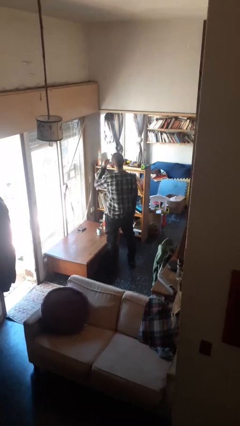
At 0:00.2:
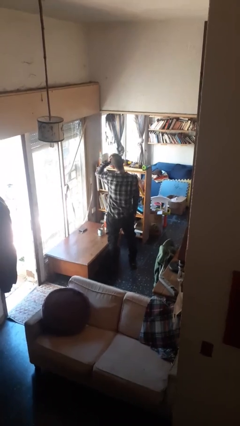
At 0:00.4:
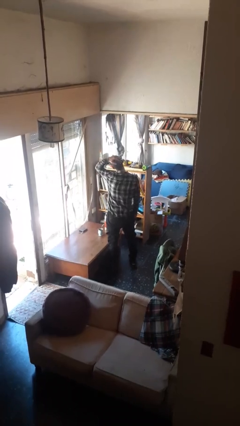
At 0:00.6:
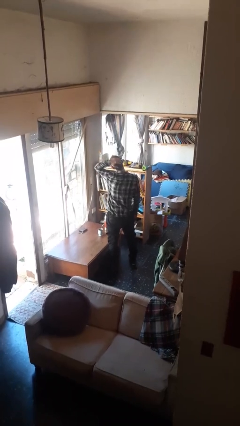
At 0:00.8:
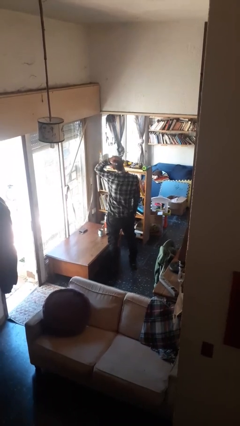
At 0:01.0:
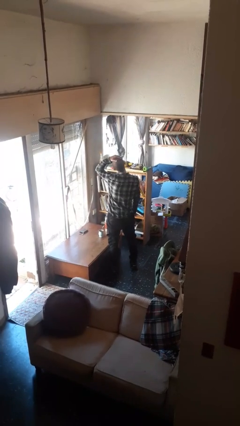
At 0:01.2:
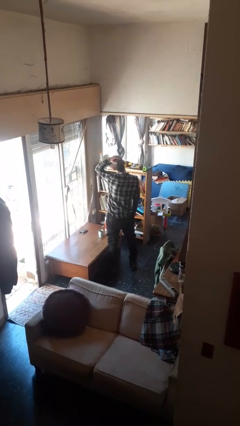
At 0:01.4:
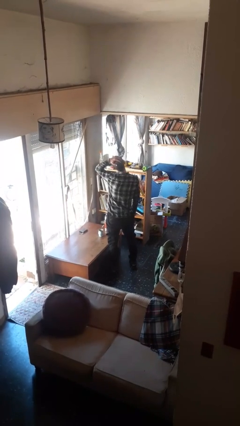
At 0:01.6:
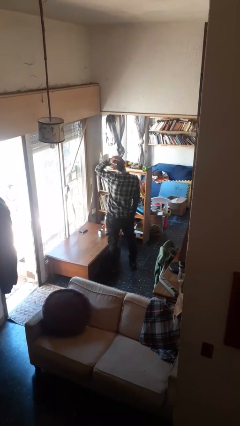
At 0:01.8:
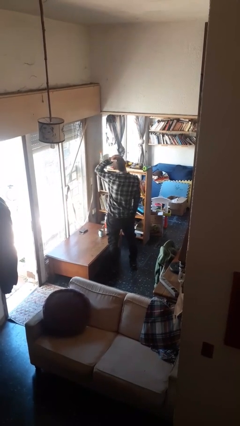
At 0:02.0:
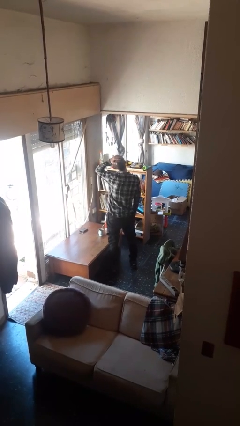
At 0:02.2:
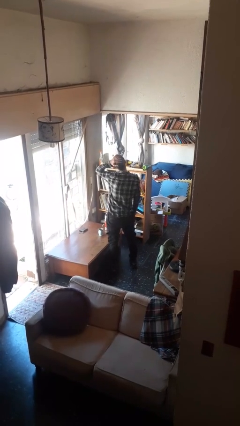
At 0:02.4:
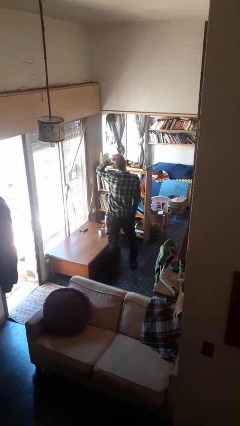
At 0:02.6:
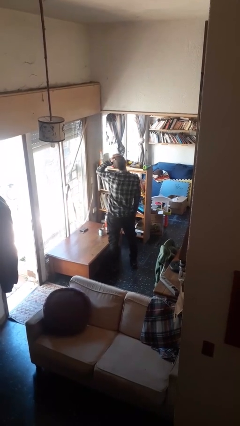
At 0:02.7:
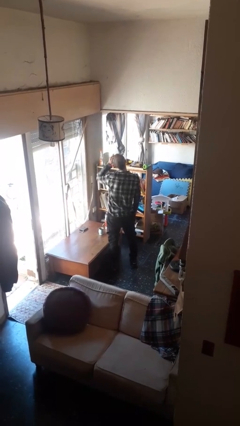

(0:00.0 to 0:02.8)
person pats head

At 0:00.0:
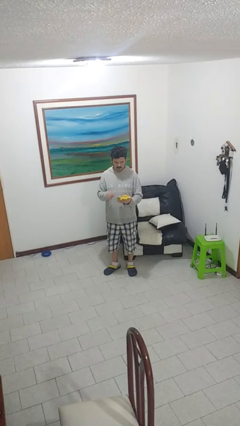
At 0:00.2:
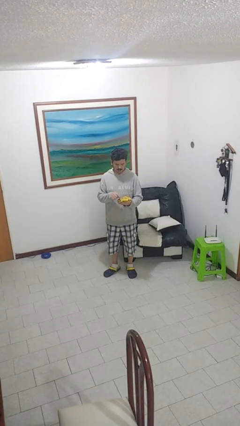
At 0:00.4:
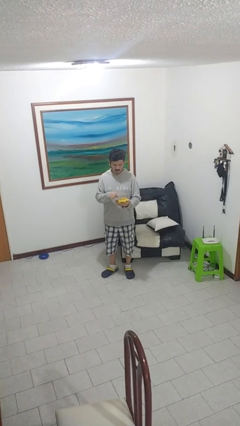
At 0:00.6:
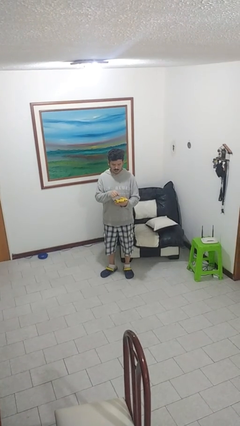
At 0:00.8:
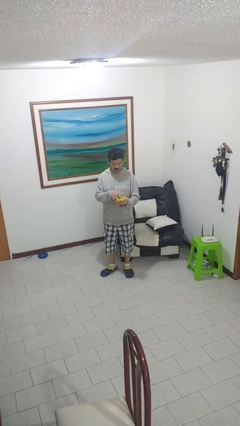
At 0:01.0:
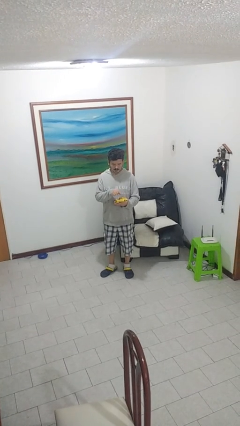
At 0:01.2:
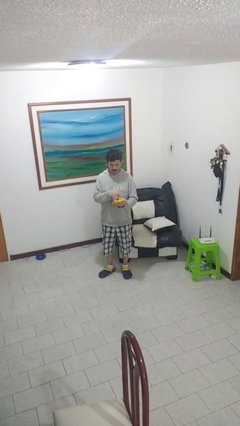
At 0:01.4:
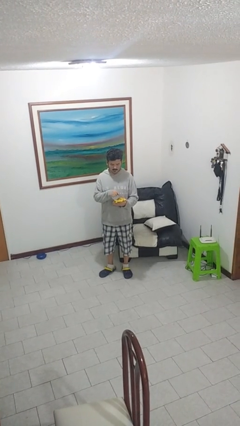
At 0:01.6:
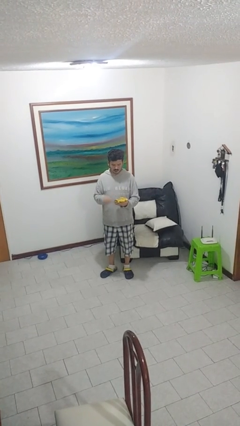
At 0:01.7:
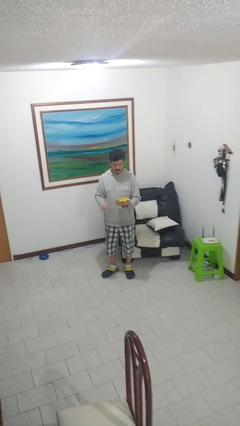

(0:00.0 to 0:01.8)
person taps object with finger

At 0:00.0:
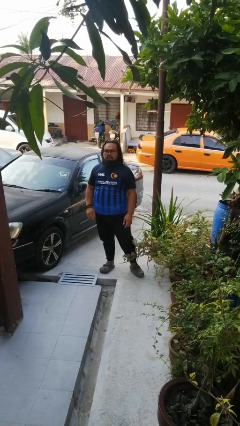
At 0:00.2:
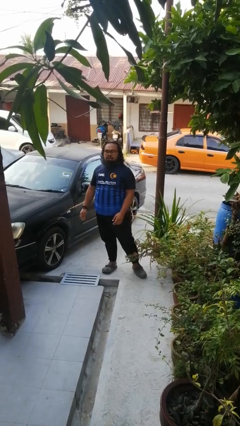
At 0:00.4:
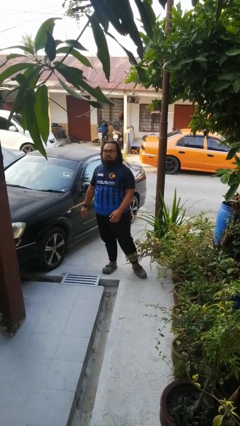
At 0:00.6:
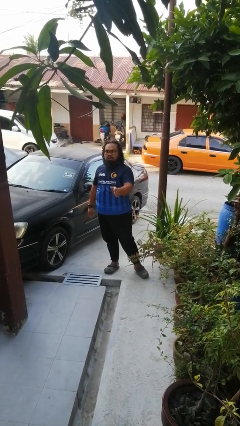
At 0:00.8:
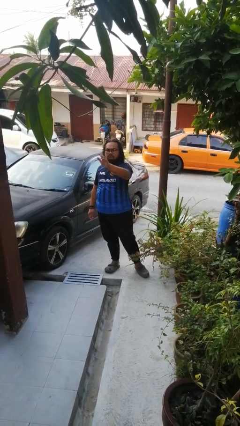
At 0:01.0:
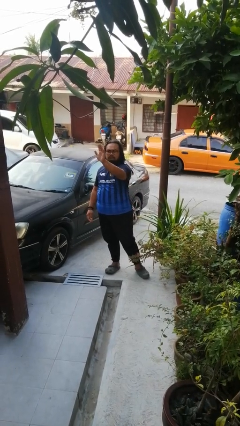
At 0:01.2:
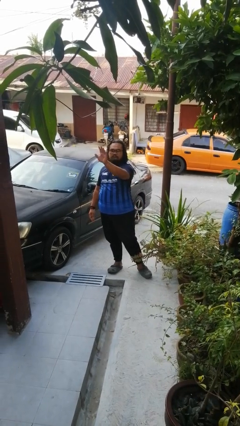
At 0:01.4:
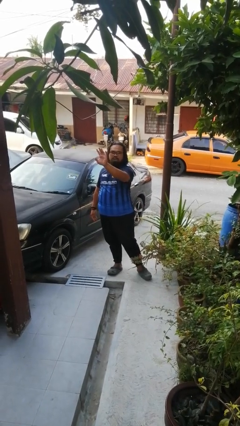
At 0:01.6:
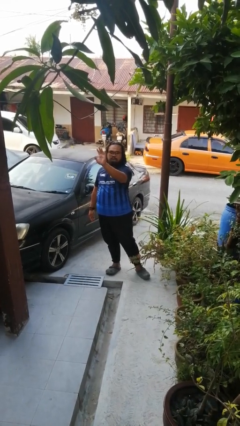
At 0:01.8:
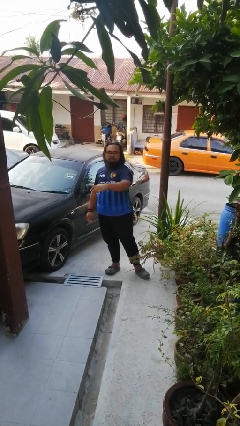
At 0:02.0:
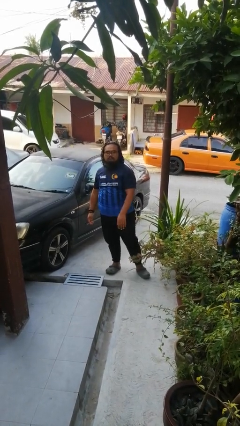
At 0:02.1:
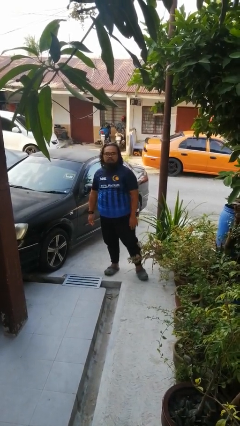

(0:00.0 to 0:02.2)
person waves at person

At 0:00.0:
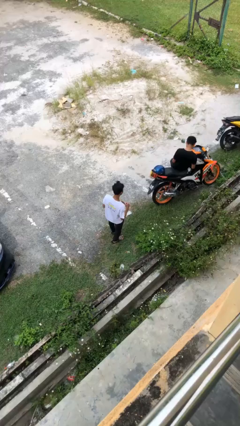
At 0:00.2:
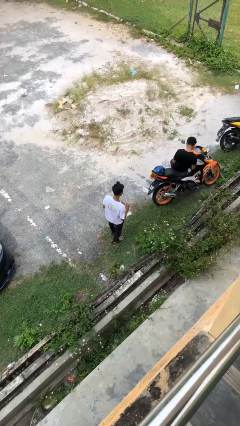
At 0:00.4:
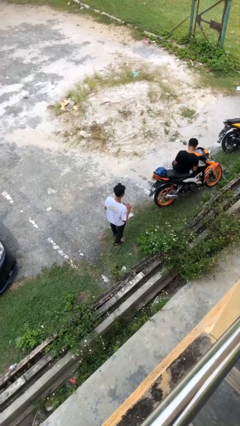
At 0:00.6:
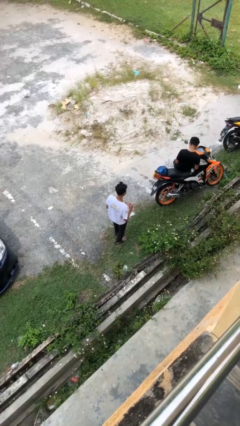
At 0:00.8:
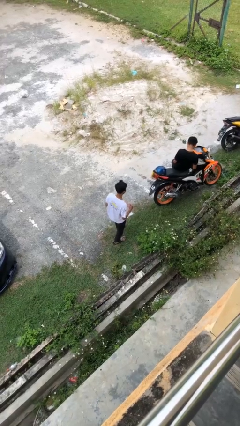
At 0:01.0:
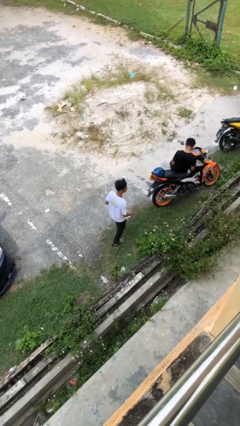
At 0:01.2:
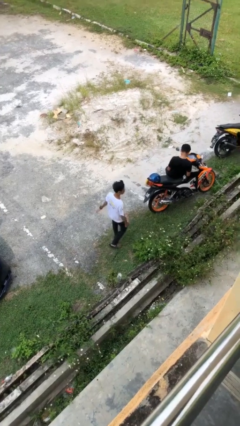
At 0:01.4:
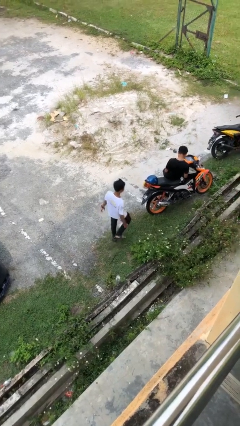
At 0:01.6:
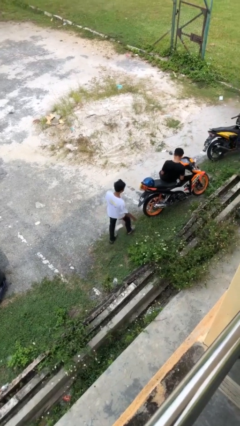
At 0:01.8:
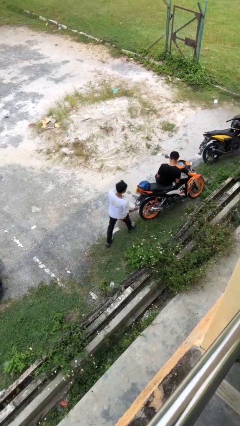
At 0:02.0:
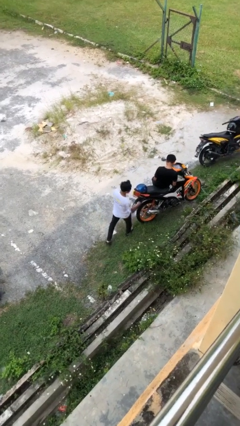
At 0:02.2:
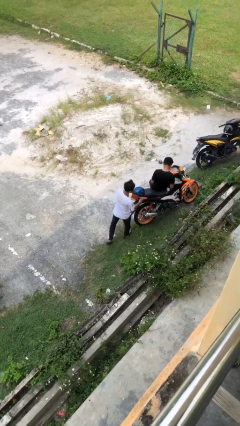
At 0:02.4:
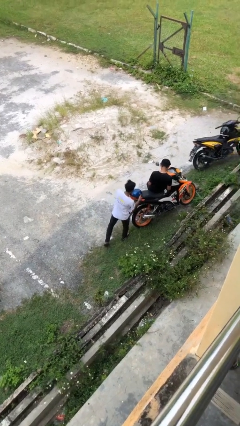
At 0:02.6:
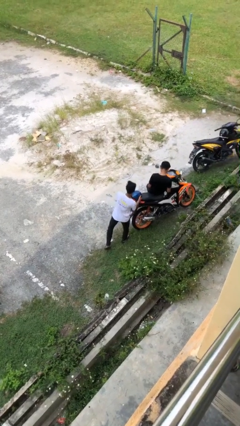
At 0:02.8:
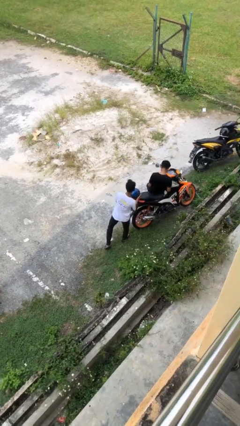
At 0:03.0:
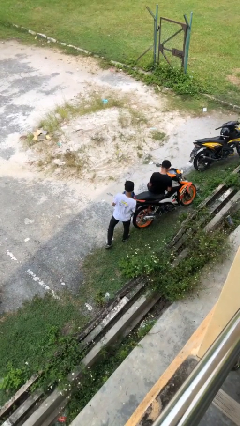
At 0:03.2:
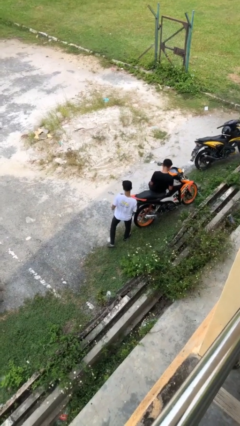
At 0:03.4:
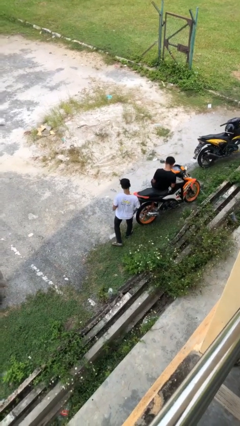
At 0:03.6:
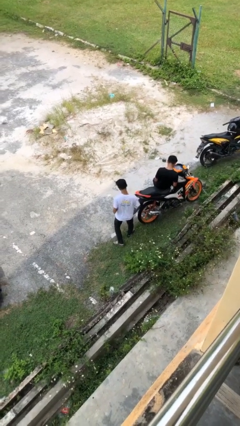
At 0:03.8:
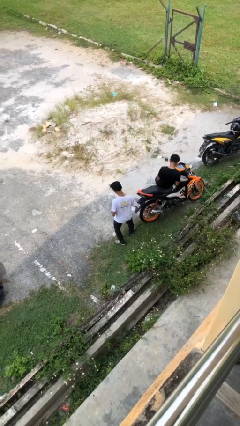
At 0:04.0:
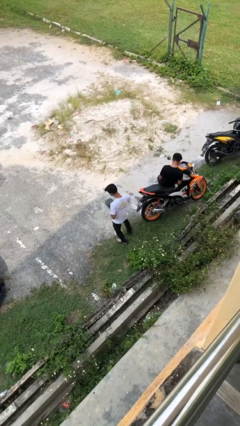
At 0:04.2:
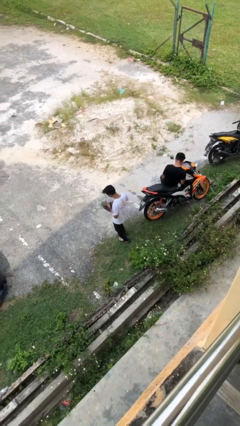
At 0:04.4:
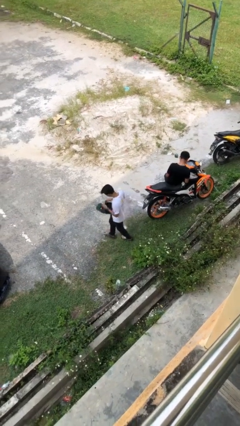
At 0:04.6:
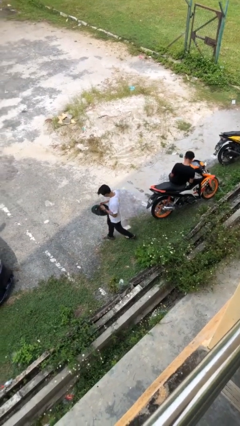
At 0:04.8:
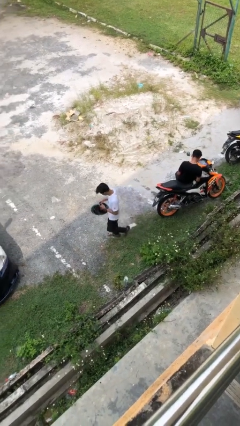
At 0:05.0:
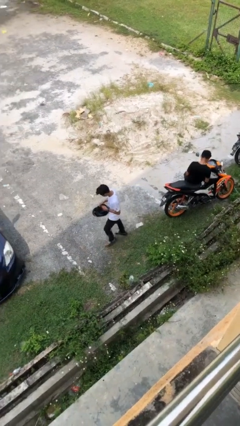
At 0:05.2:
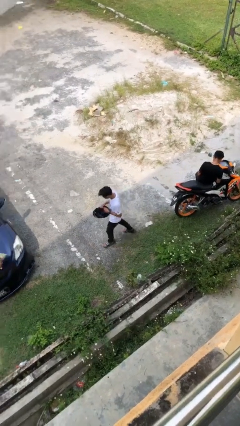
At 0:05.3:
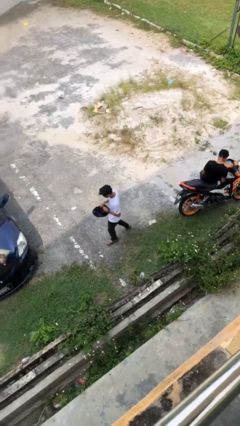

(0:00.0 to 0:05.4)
person steals object from person

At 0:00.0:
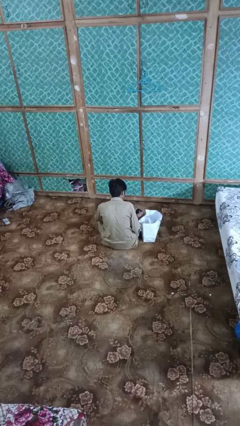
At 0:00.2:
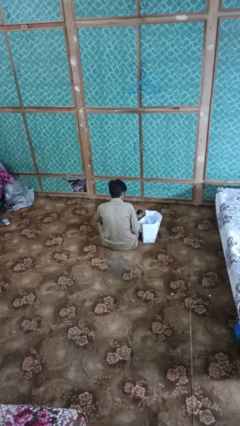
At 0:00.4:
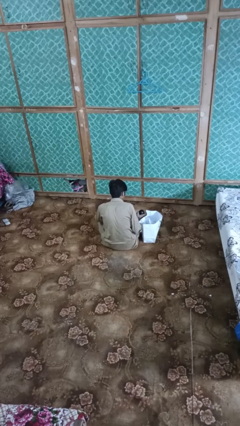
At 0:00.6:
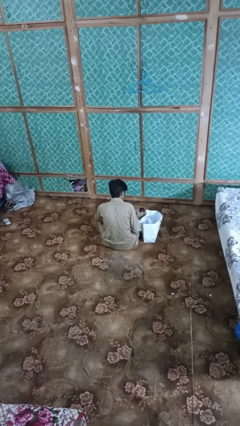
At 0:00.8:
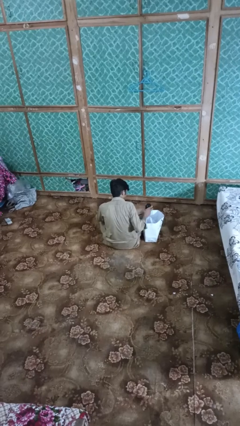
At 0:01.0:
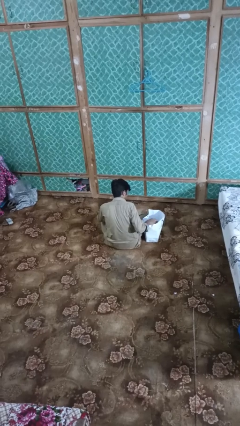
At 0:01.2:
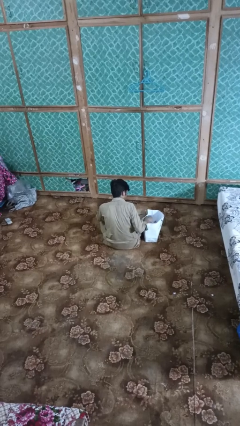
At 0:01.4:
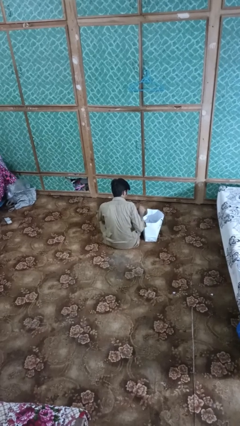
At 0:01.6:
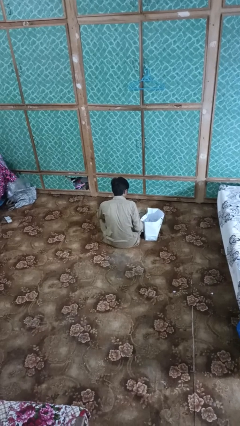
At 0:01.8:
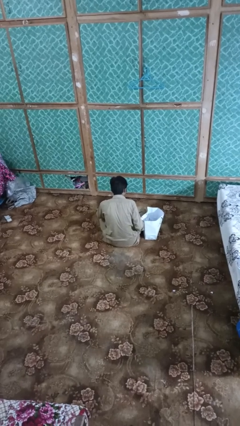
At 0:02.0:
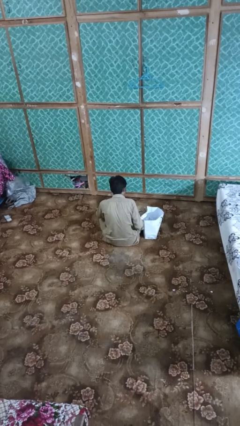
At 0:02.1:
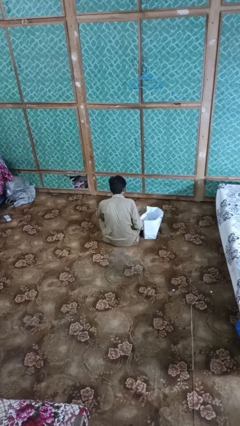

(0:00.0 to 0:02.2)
person puts object into bag

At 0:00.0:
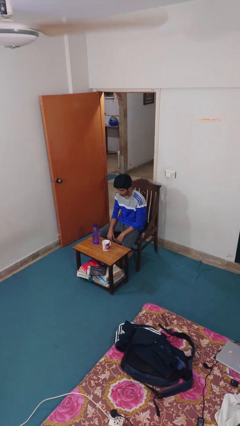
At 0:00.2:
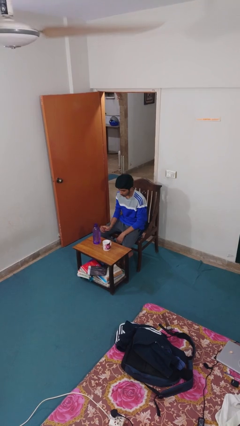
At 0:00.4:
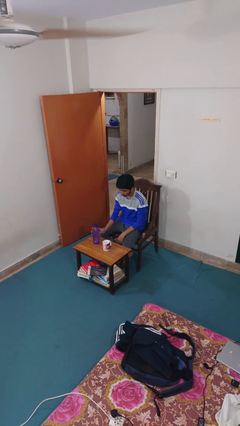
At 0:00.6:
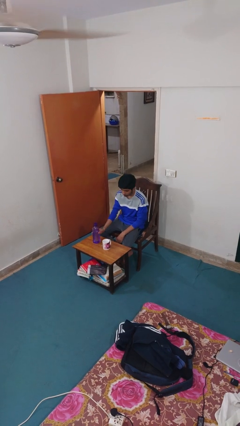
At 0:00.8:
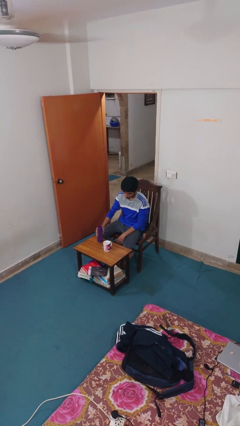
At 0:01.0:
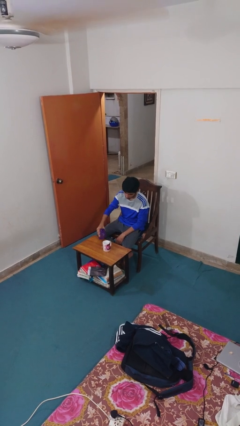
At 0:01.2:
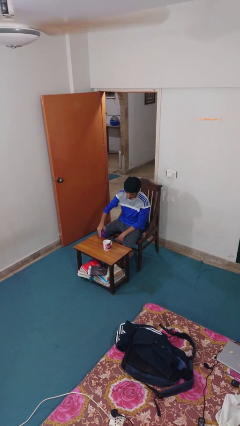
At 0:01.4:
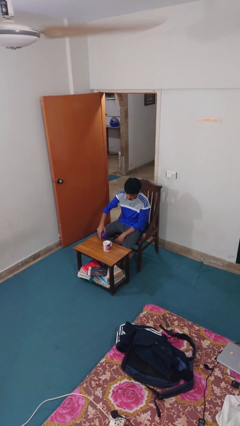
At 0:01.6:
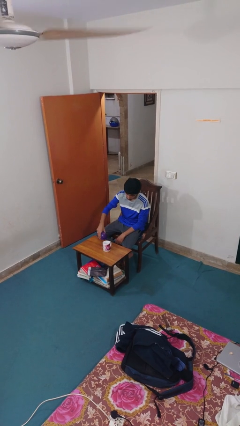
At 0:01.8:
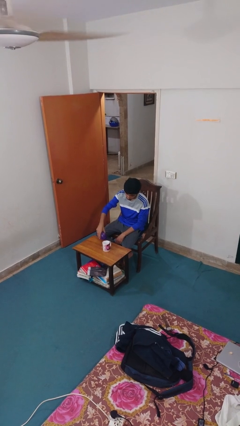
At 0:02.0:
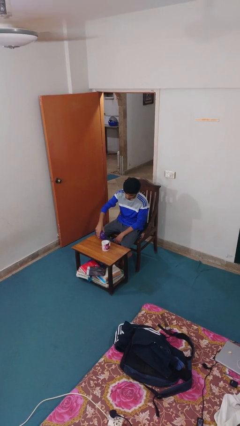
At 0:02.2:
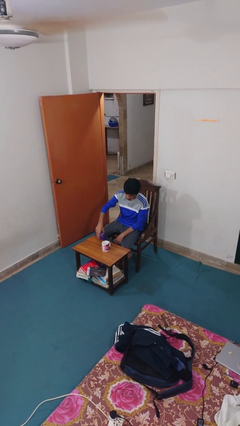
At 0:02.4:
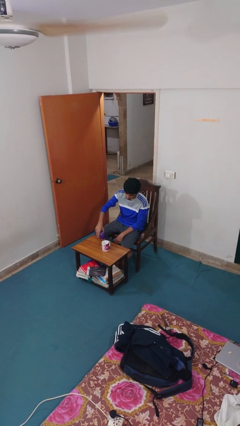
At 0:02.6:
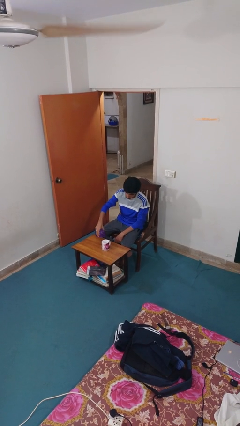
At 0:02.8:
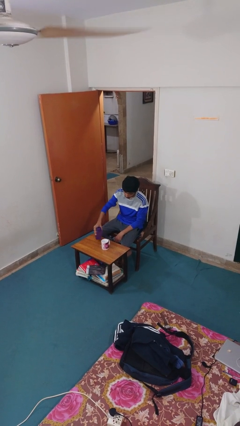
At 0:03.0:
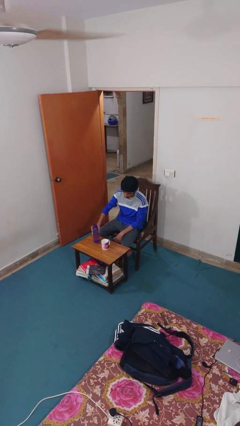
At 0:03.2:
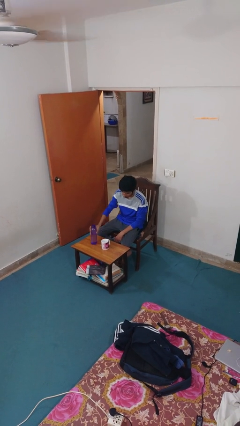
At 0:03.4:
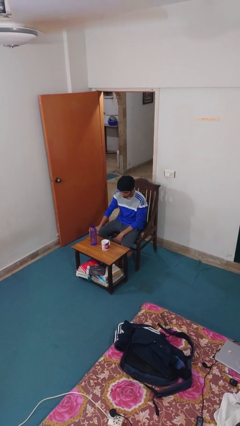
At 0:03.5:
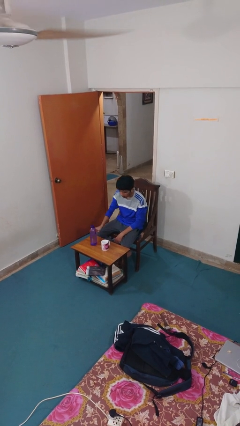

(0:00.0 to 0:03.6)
person pours liquid into cup
